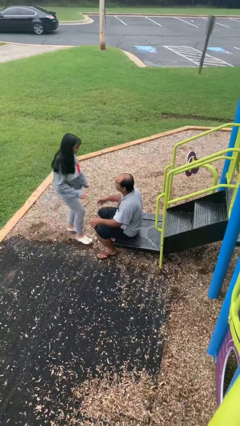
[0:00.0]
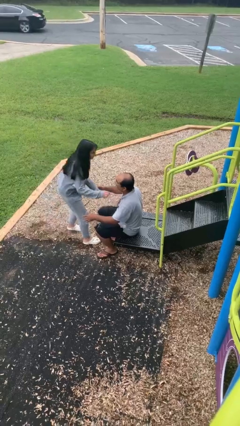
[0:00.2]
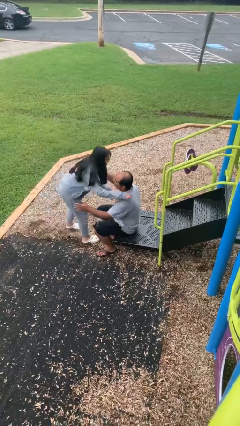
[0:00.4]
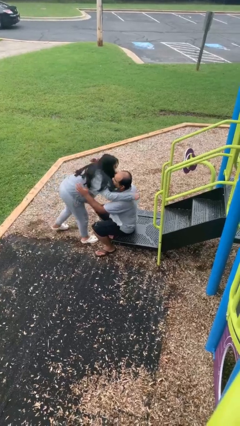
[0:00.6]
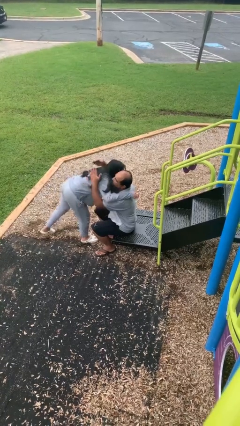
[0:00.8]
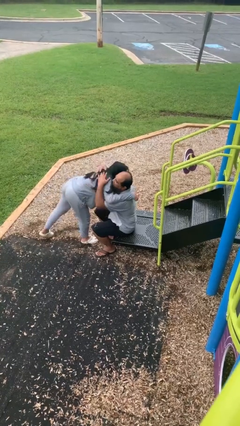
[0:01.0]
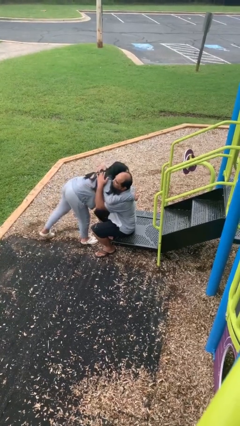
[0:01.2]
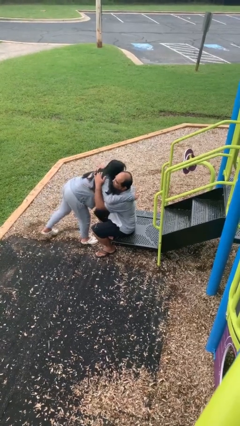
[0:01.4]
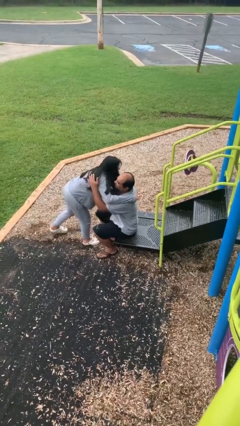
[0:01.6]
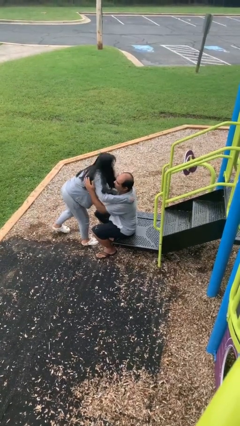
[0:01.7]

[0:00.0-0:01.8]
person embraces person

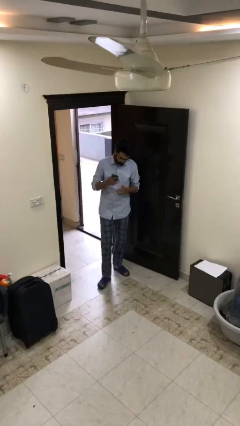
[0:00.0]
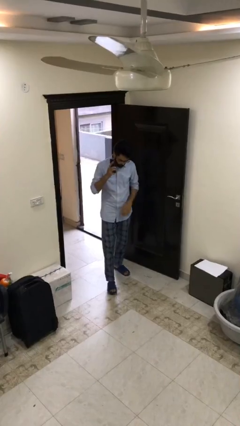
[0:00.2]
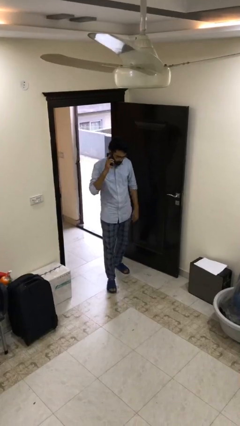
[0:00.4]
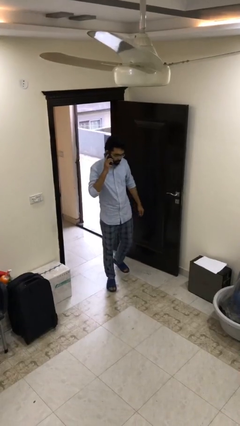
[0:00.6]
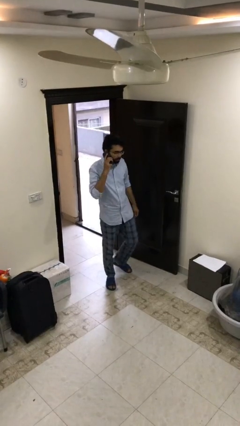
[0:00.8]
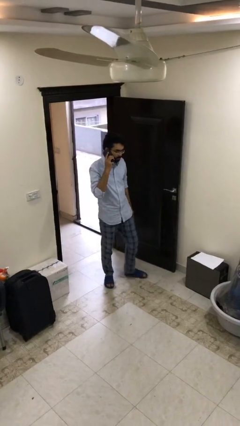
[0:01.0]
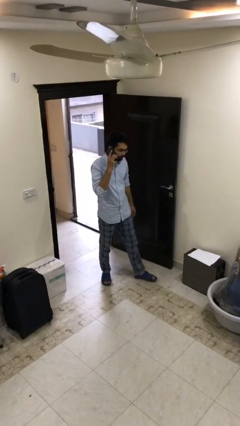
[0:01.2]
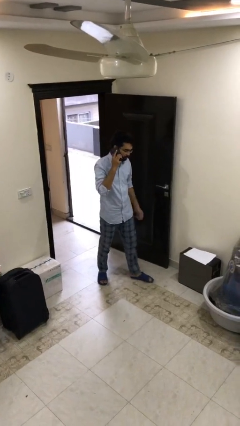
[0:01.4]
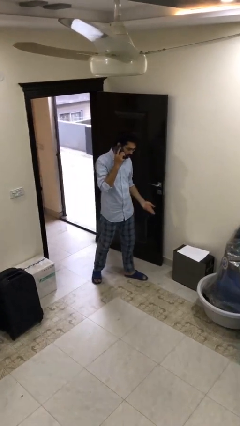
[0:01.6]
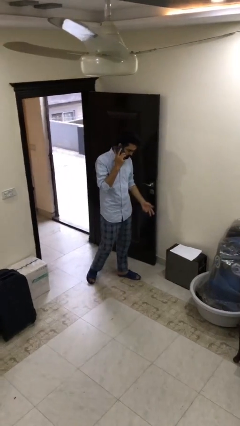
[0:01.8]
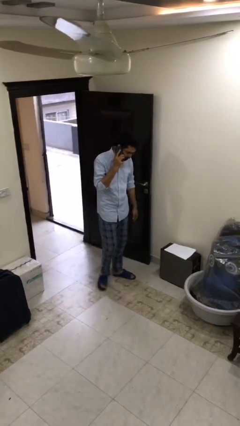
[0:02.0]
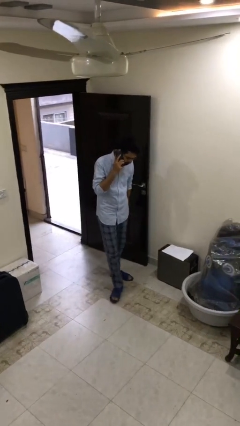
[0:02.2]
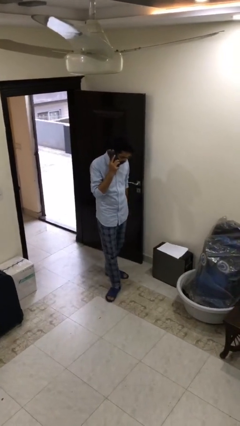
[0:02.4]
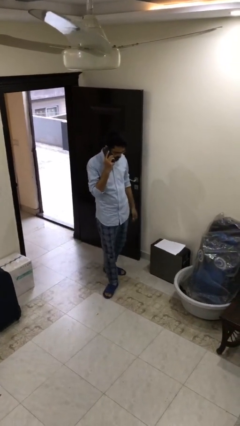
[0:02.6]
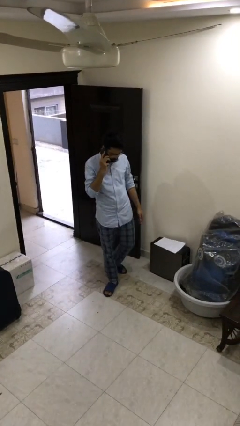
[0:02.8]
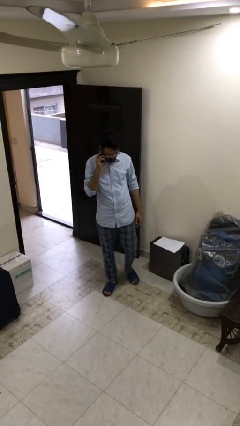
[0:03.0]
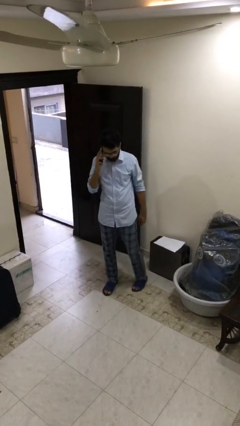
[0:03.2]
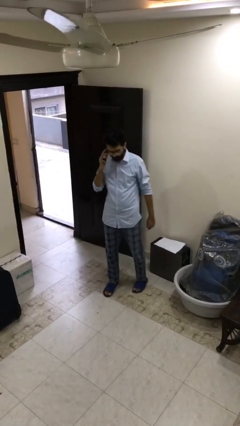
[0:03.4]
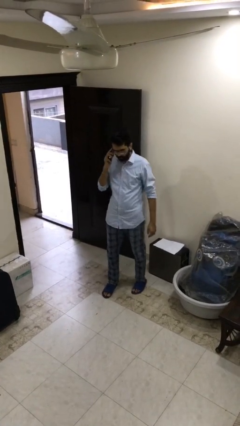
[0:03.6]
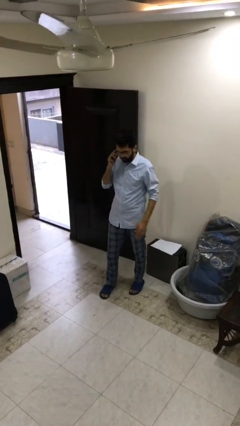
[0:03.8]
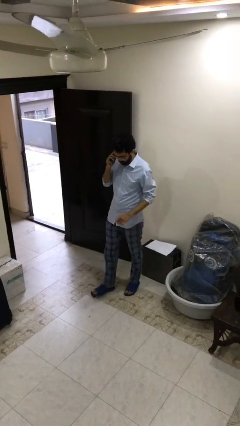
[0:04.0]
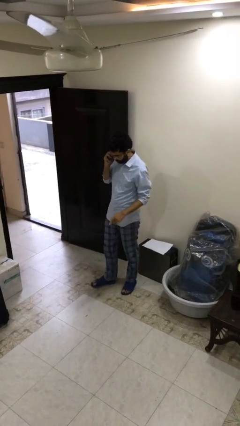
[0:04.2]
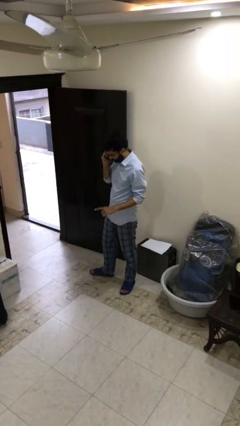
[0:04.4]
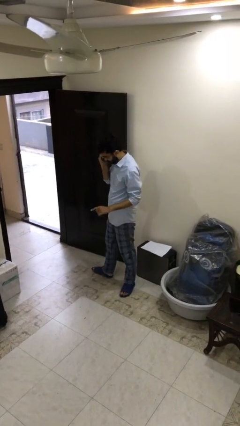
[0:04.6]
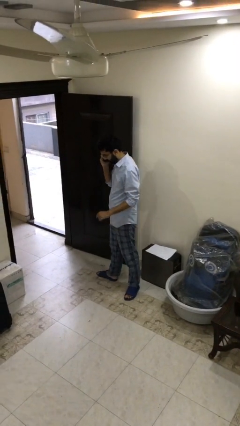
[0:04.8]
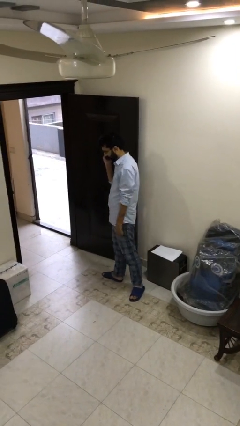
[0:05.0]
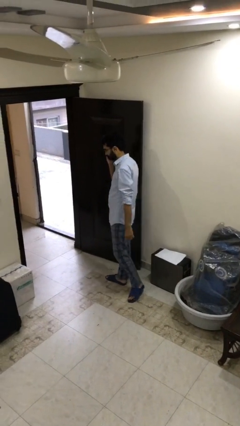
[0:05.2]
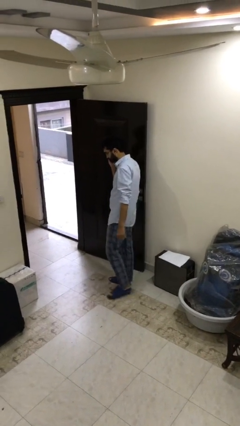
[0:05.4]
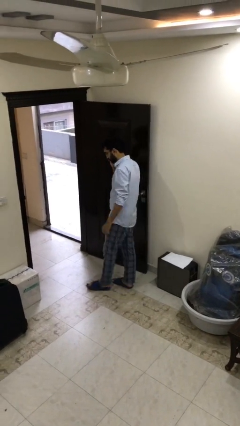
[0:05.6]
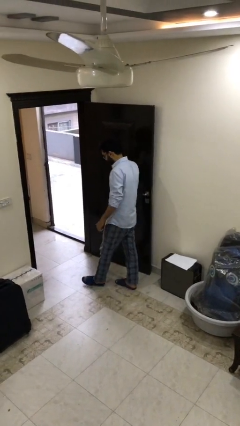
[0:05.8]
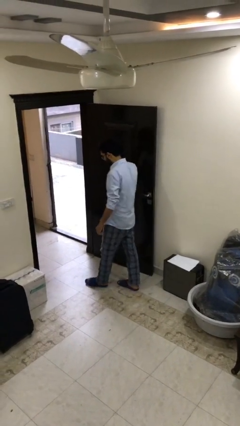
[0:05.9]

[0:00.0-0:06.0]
person talks on phone

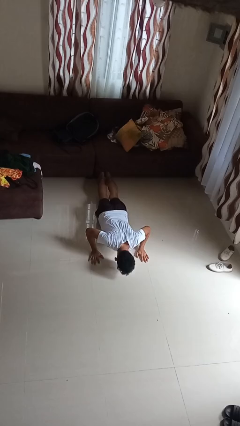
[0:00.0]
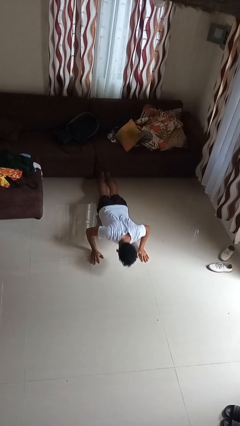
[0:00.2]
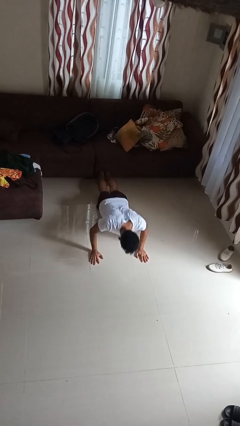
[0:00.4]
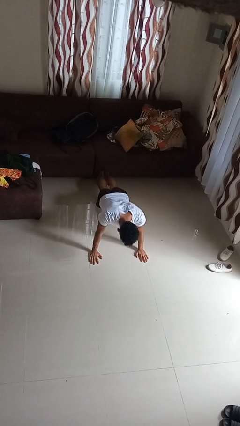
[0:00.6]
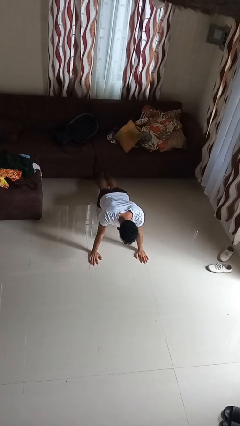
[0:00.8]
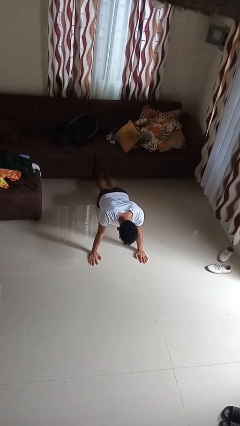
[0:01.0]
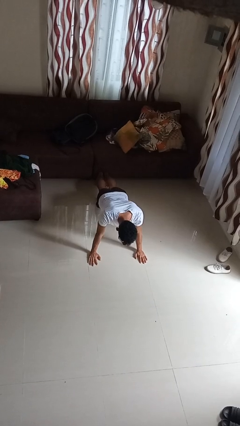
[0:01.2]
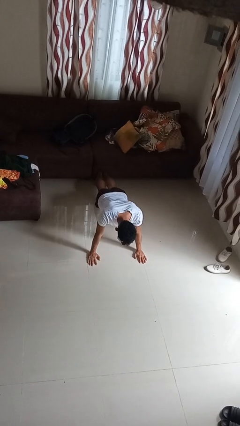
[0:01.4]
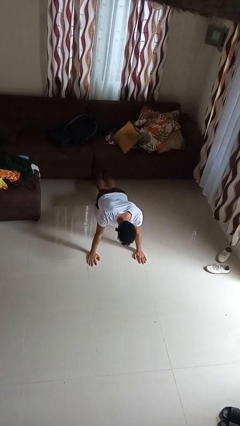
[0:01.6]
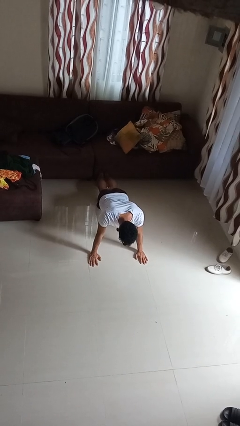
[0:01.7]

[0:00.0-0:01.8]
person exercises with pushup

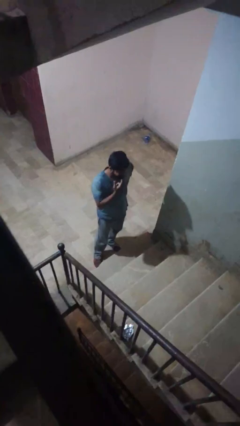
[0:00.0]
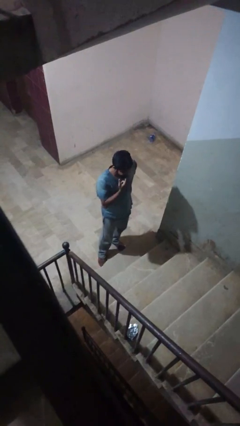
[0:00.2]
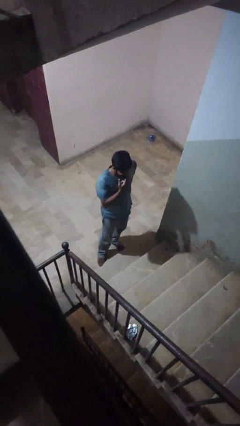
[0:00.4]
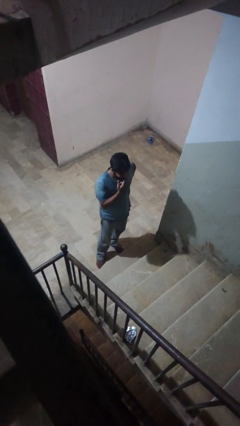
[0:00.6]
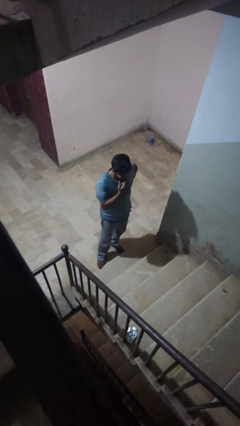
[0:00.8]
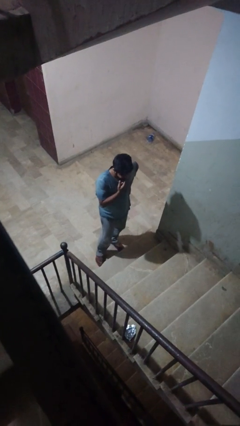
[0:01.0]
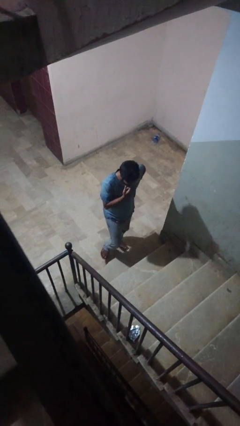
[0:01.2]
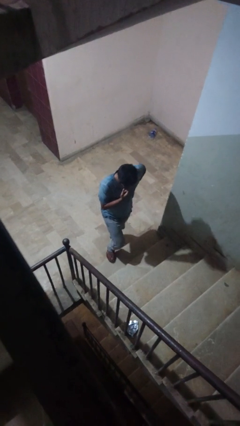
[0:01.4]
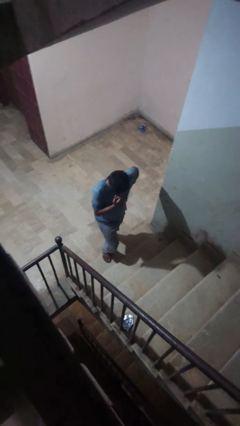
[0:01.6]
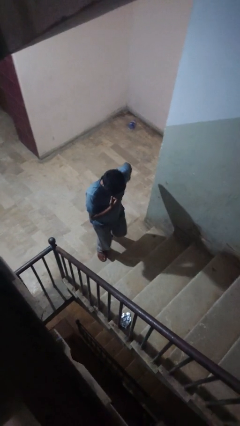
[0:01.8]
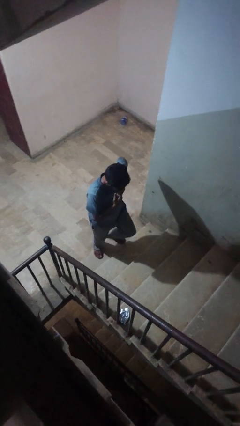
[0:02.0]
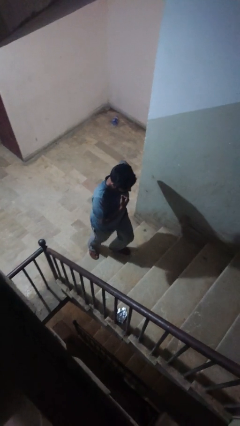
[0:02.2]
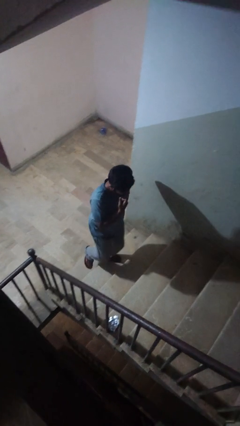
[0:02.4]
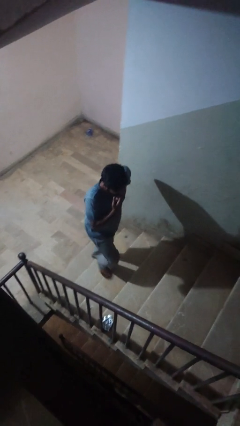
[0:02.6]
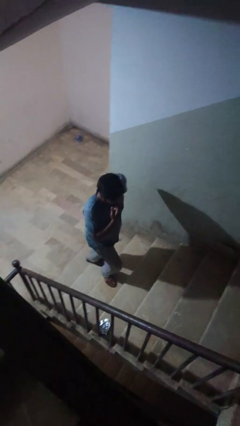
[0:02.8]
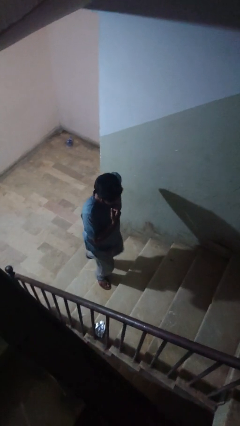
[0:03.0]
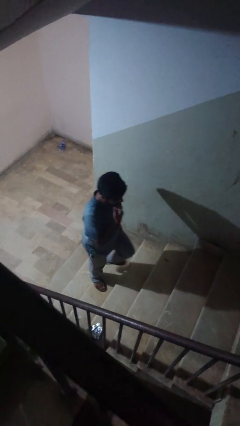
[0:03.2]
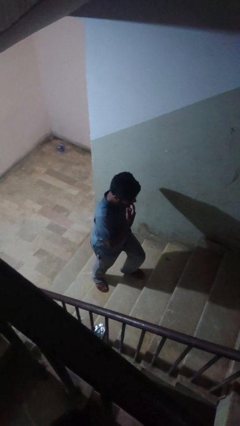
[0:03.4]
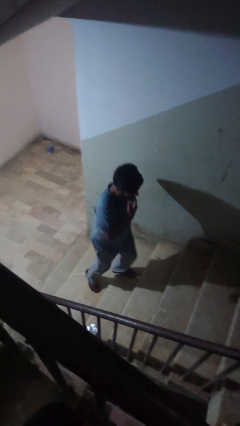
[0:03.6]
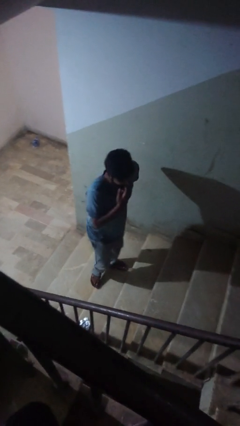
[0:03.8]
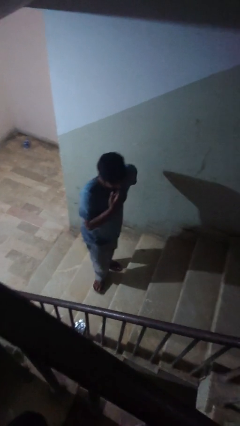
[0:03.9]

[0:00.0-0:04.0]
person climbs up stairs

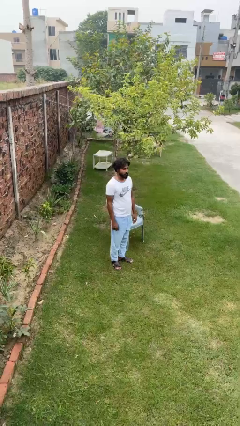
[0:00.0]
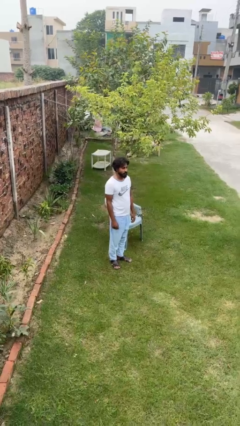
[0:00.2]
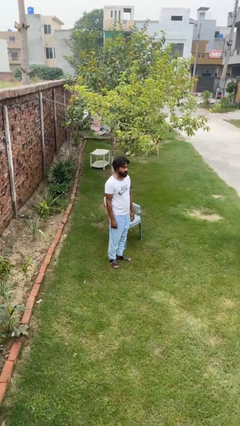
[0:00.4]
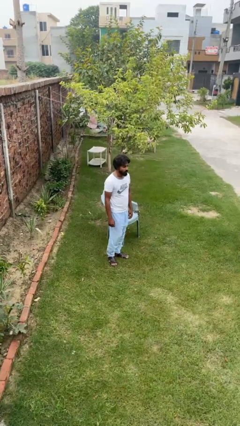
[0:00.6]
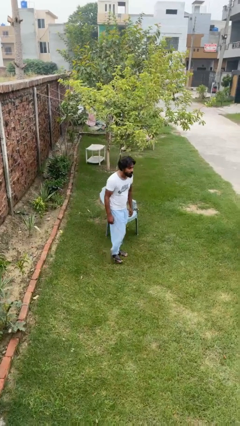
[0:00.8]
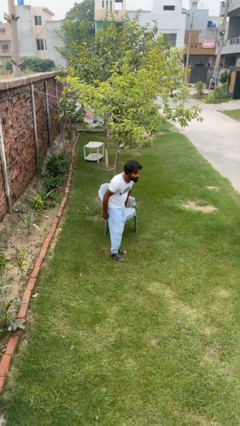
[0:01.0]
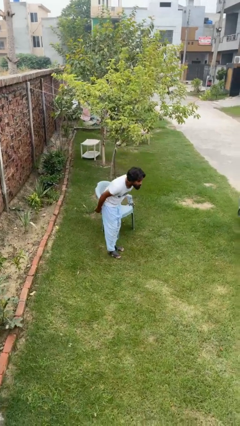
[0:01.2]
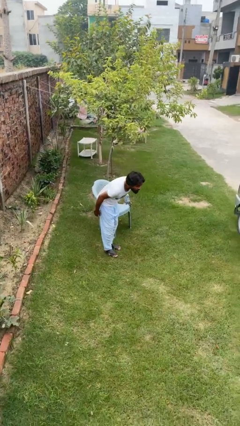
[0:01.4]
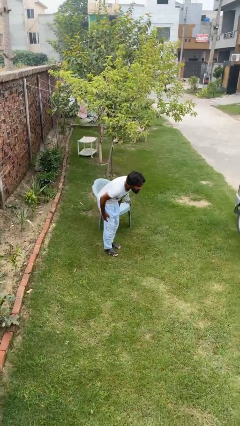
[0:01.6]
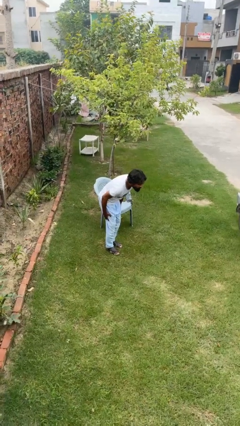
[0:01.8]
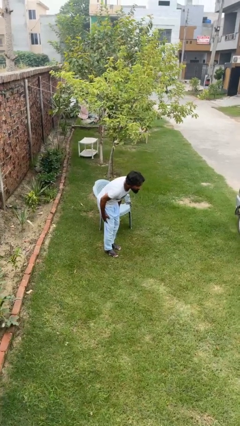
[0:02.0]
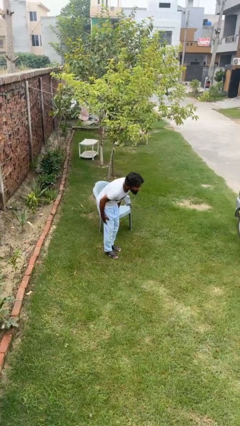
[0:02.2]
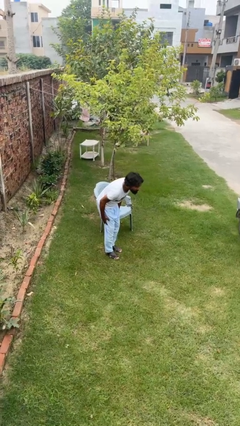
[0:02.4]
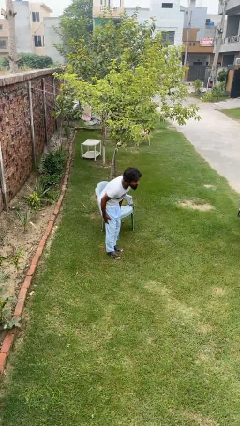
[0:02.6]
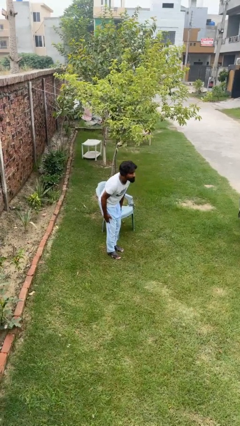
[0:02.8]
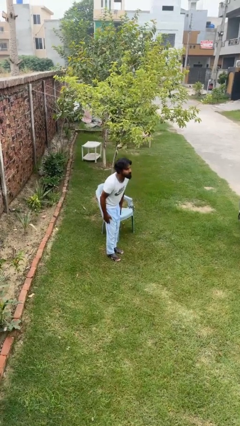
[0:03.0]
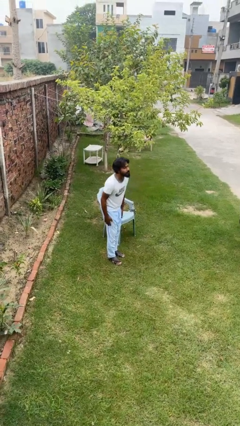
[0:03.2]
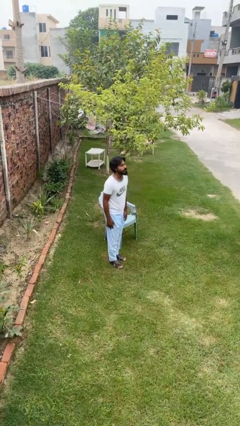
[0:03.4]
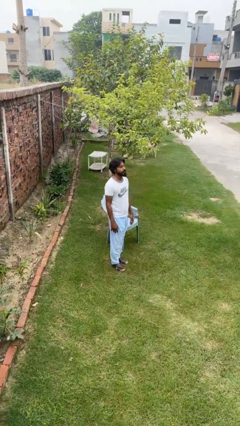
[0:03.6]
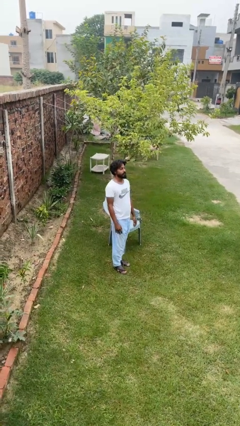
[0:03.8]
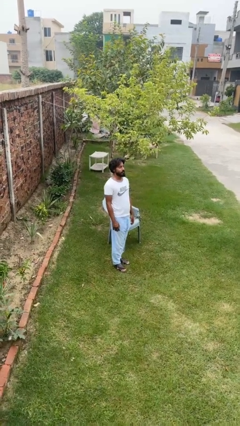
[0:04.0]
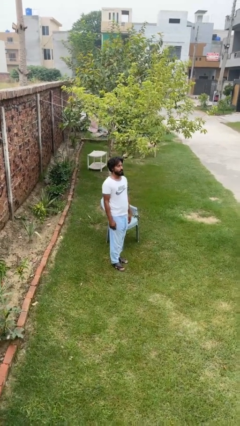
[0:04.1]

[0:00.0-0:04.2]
person bows
